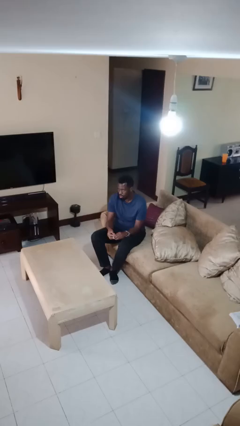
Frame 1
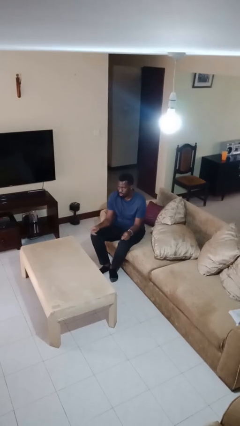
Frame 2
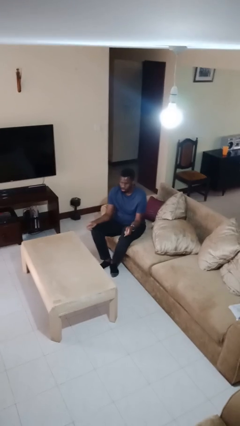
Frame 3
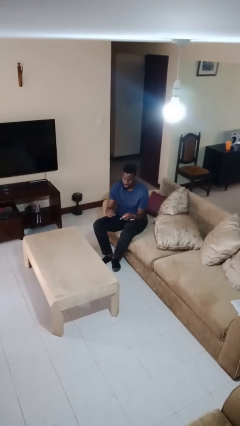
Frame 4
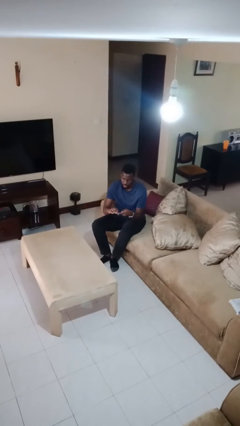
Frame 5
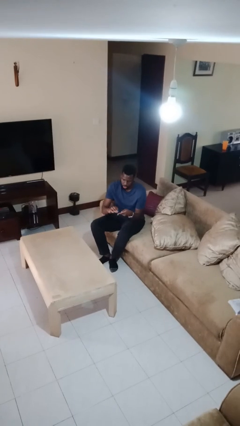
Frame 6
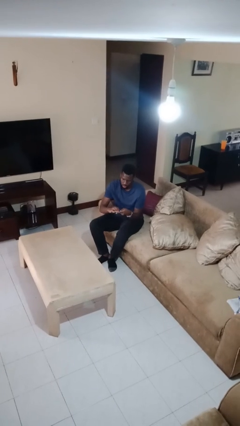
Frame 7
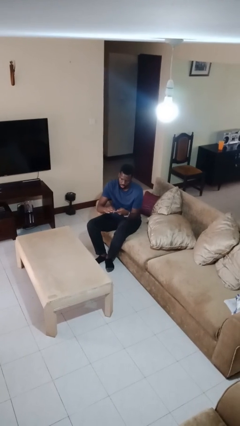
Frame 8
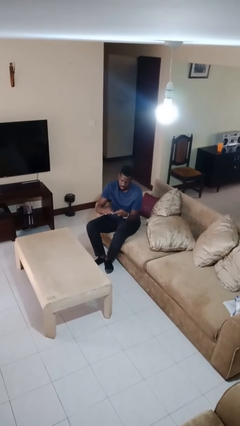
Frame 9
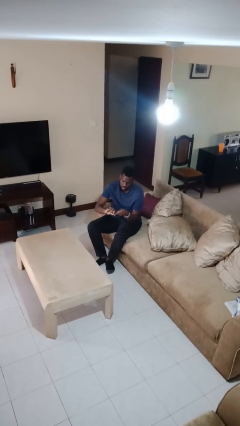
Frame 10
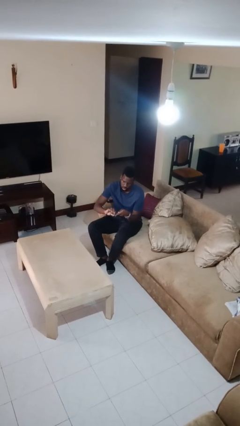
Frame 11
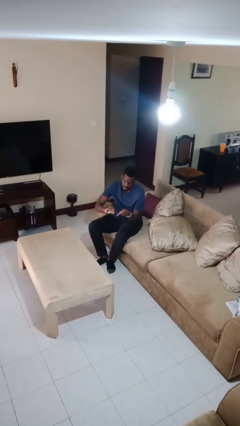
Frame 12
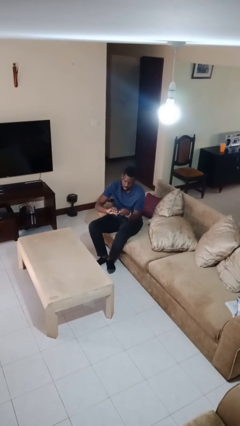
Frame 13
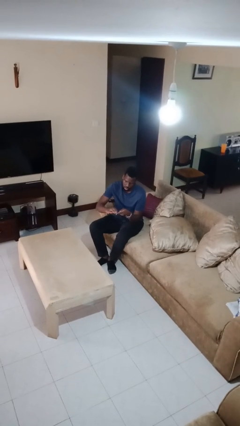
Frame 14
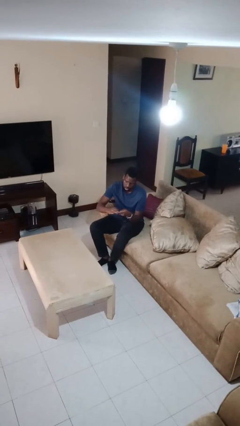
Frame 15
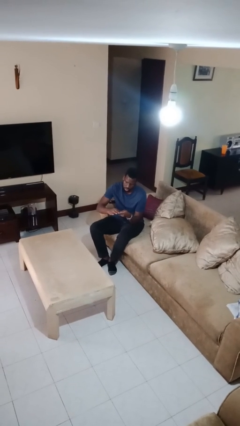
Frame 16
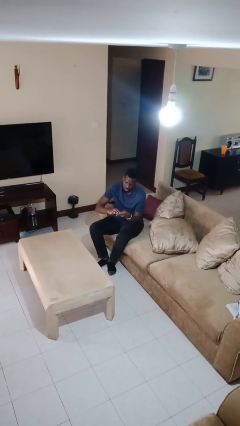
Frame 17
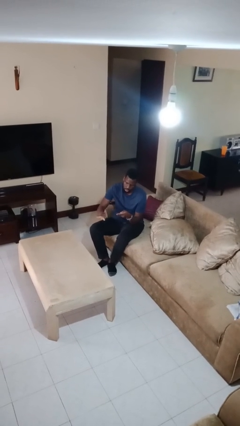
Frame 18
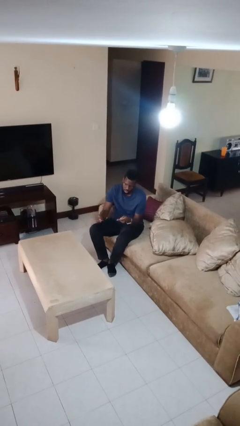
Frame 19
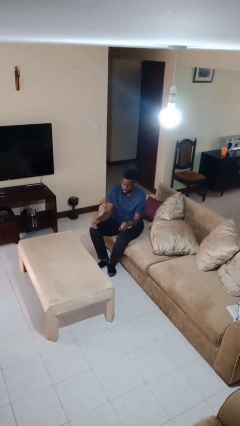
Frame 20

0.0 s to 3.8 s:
person files fingernails

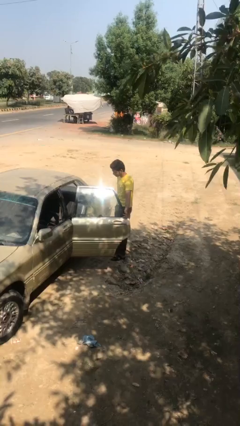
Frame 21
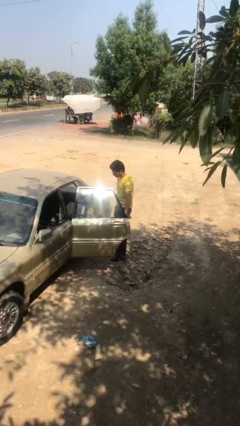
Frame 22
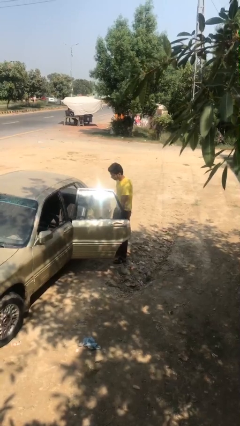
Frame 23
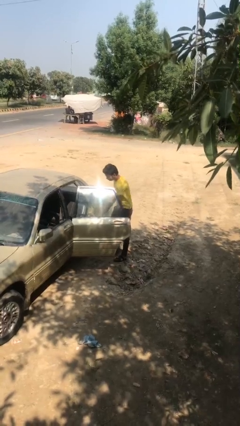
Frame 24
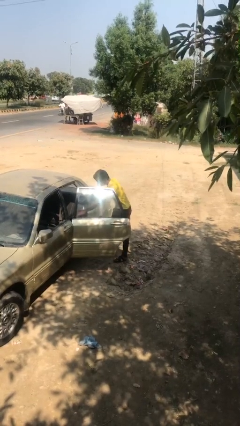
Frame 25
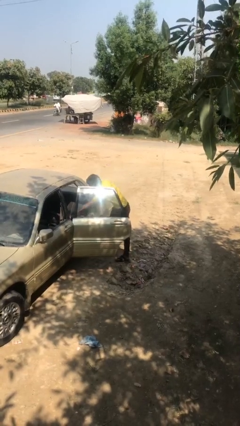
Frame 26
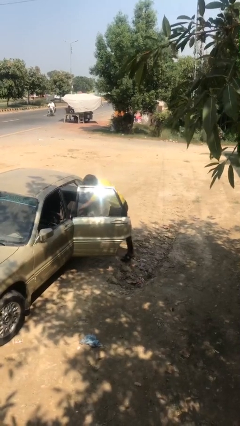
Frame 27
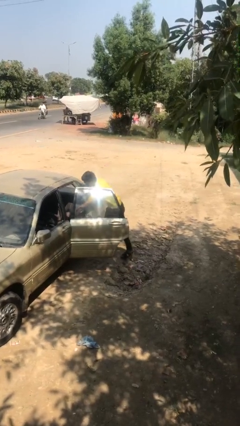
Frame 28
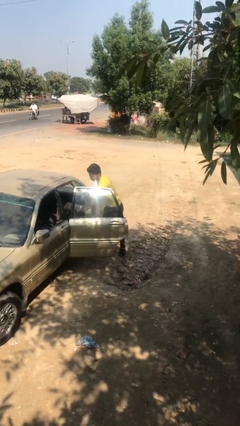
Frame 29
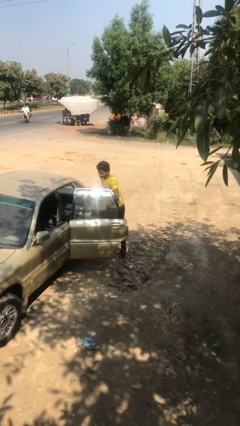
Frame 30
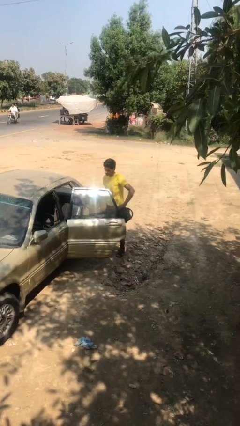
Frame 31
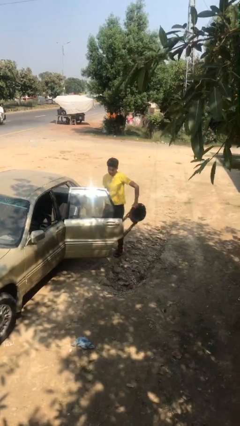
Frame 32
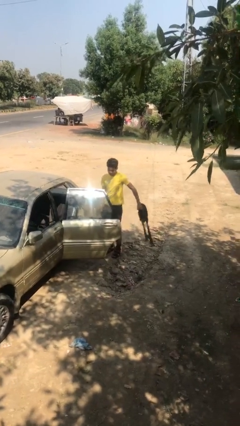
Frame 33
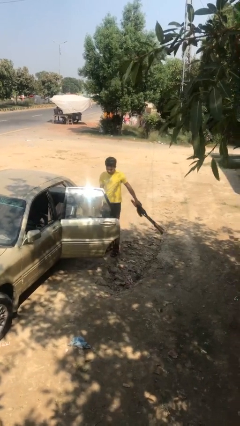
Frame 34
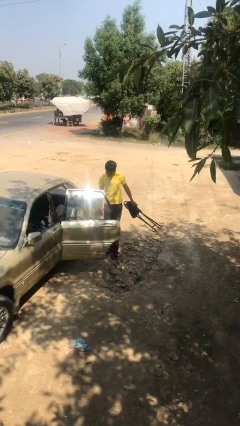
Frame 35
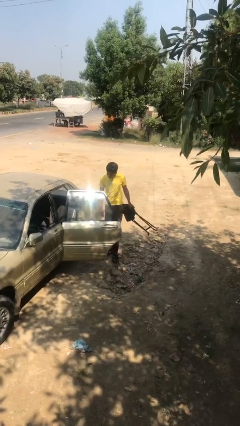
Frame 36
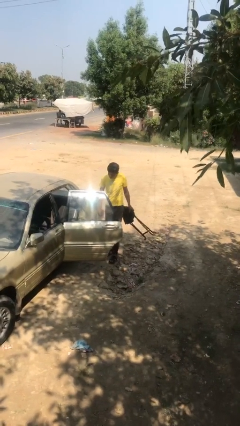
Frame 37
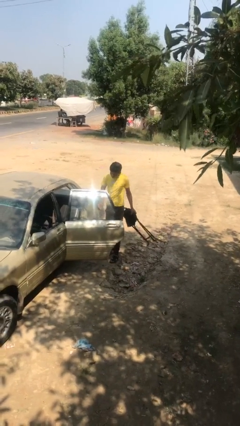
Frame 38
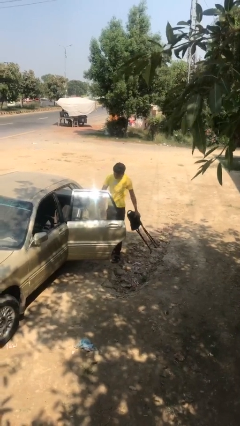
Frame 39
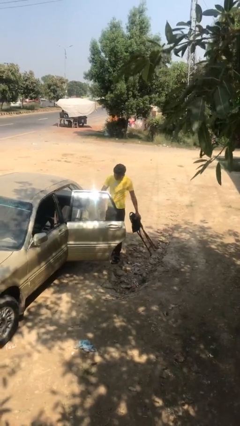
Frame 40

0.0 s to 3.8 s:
person unloads car

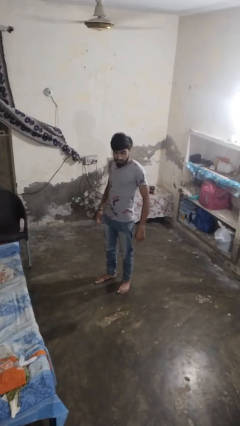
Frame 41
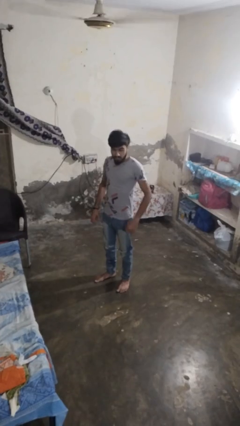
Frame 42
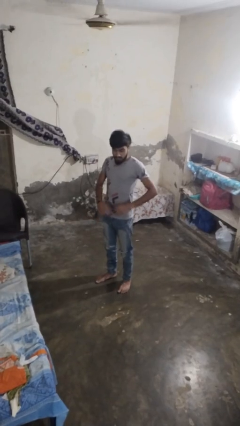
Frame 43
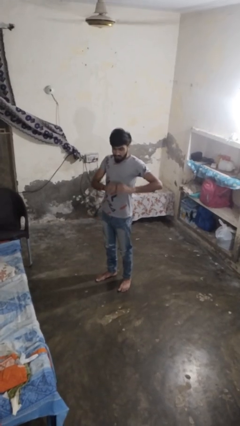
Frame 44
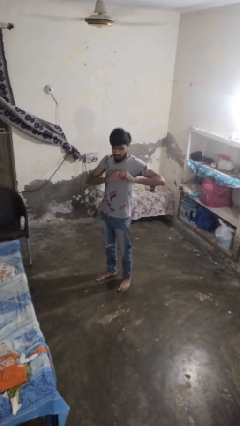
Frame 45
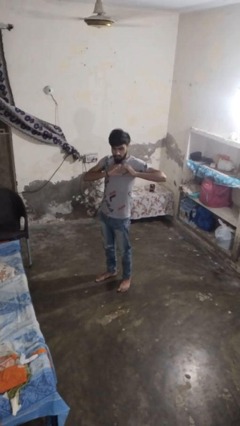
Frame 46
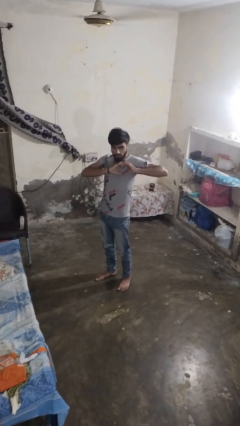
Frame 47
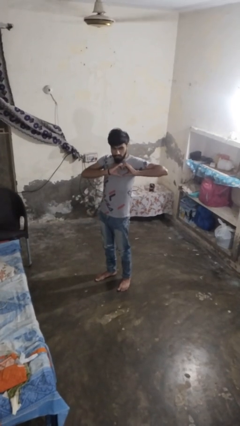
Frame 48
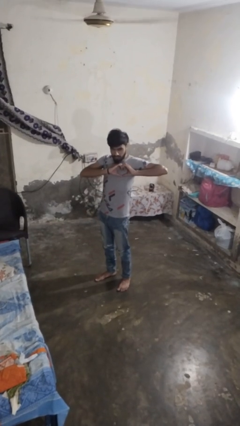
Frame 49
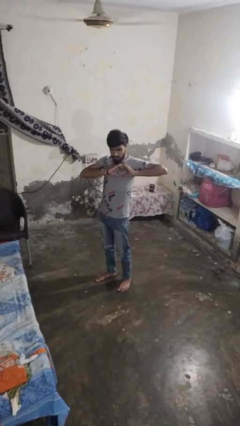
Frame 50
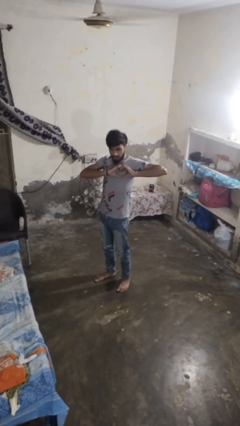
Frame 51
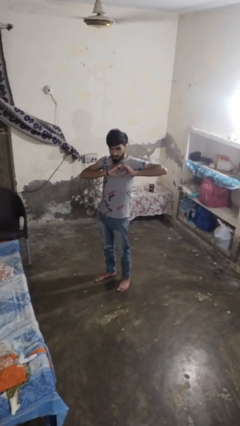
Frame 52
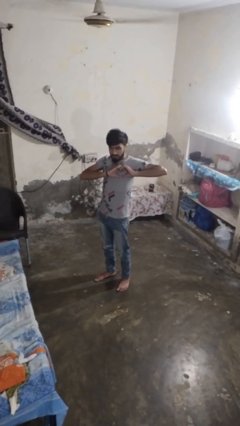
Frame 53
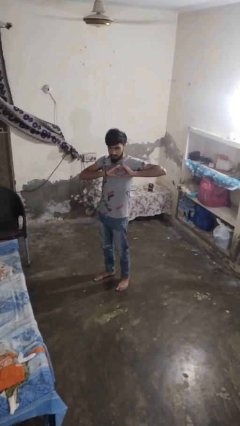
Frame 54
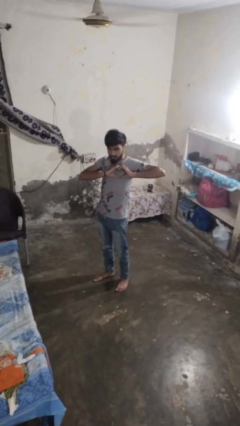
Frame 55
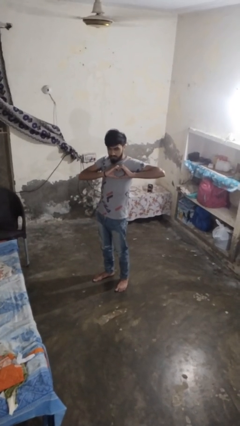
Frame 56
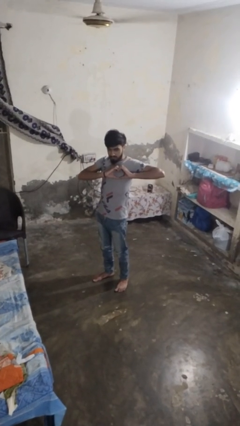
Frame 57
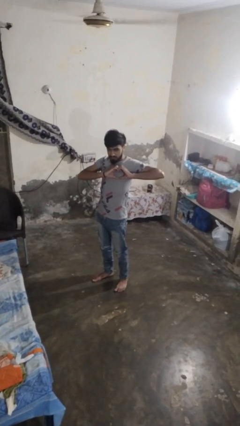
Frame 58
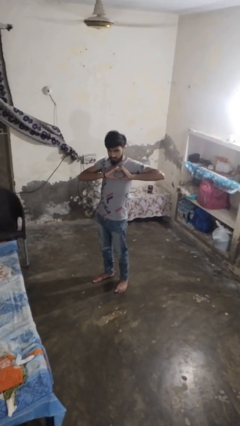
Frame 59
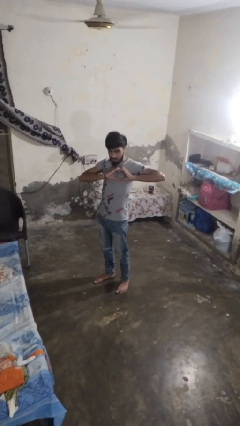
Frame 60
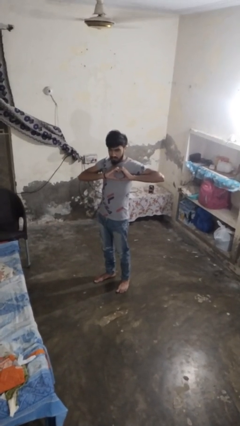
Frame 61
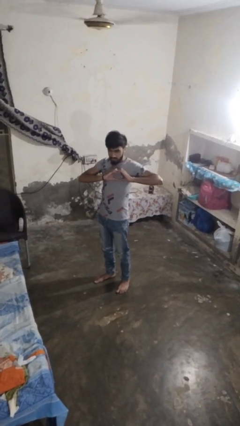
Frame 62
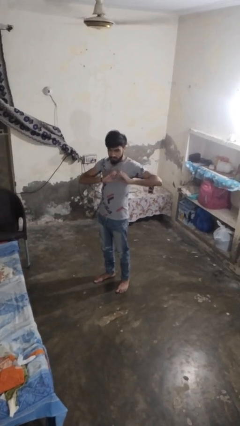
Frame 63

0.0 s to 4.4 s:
person gestures heart

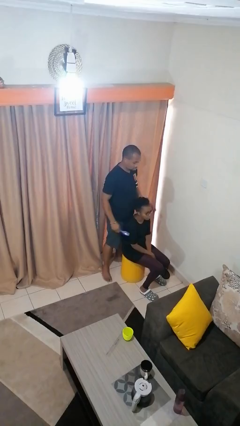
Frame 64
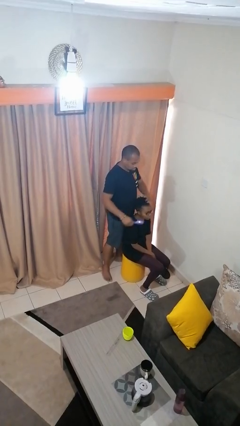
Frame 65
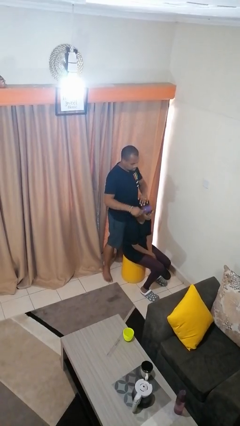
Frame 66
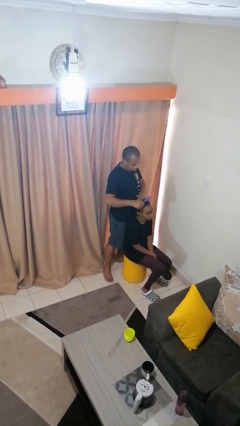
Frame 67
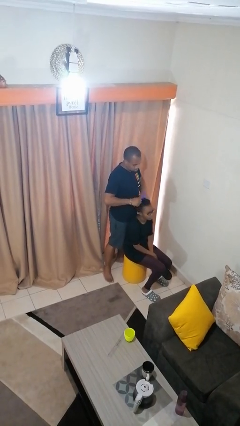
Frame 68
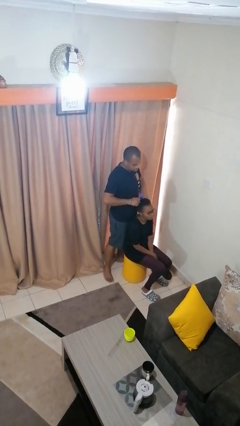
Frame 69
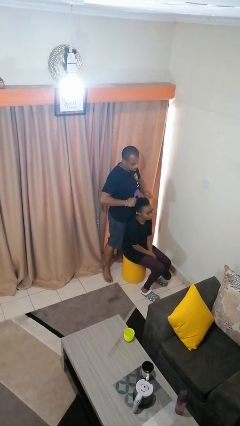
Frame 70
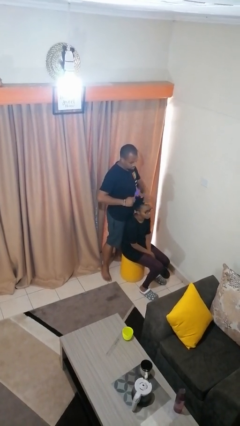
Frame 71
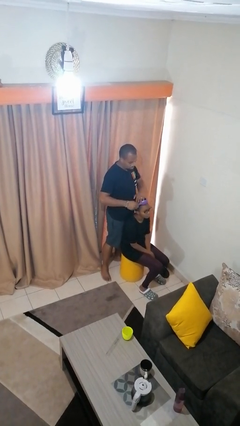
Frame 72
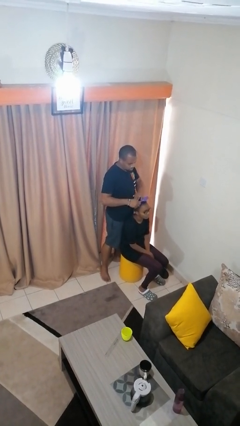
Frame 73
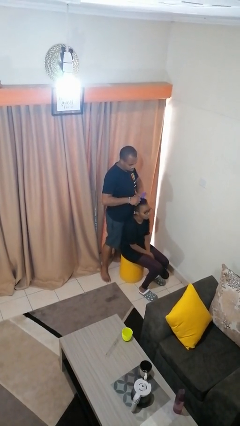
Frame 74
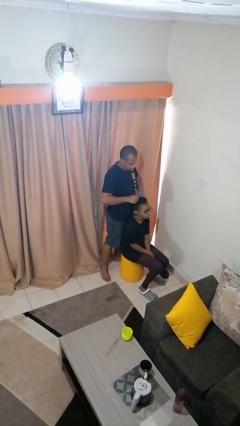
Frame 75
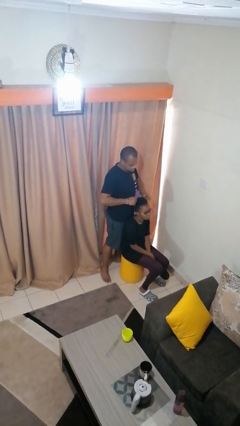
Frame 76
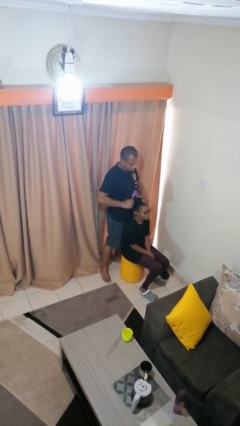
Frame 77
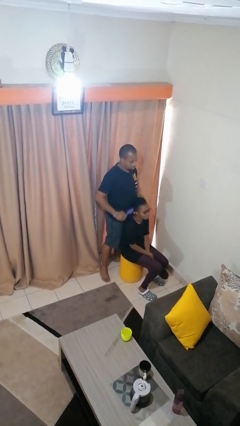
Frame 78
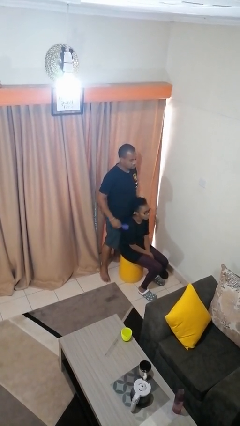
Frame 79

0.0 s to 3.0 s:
person brushes hair of person

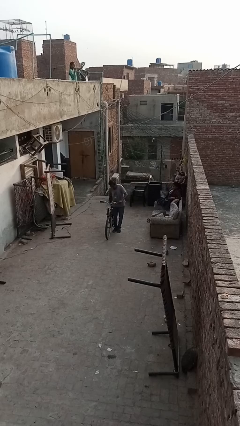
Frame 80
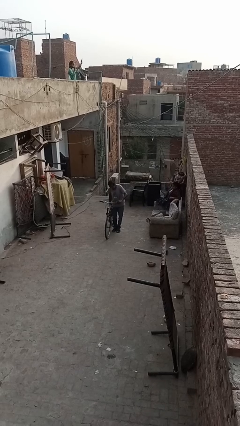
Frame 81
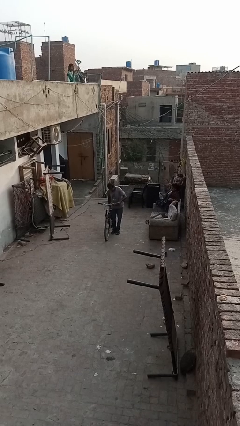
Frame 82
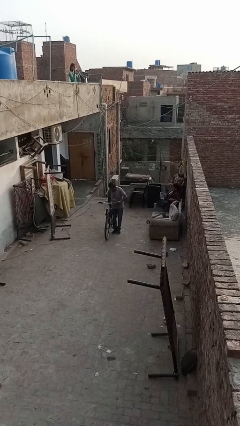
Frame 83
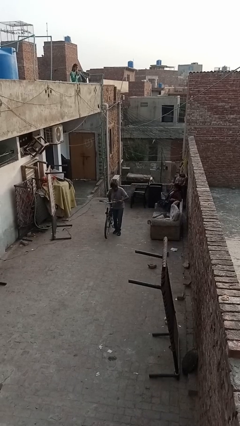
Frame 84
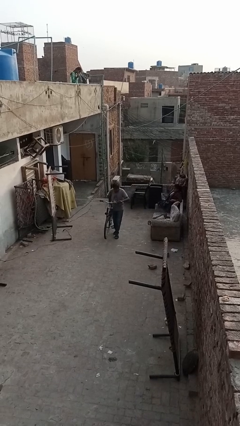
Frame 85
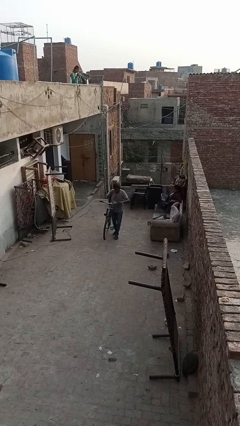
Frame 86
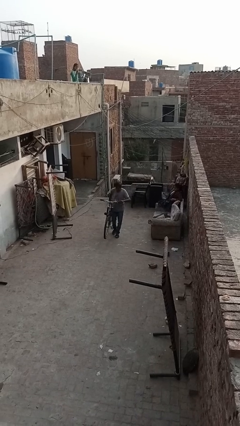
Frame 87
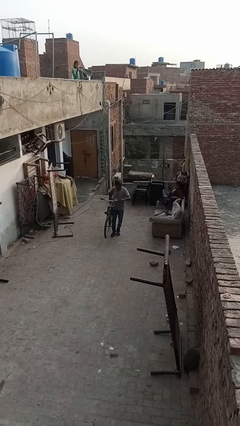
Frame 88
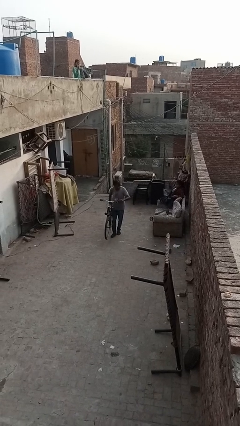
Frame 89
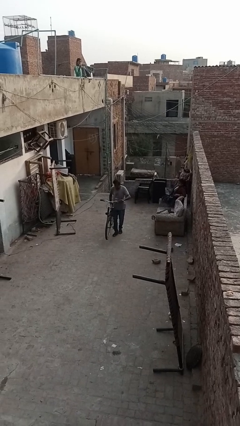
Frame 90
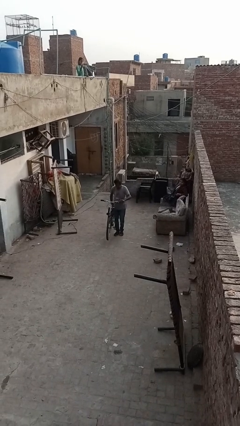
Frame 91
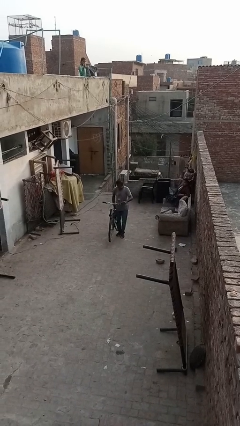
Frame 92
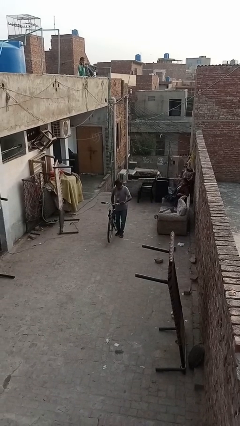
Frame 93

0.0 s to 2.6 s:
person carries bicycle
